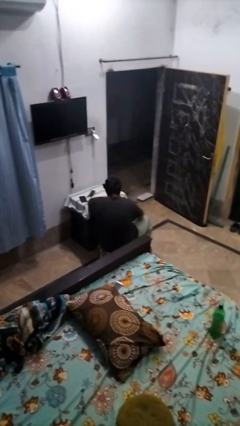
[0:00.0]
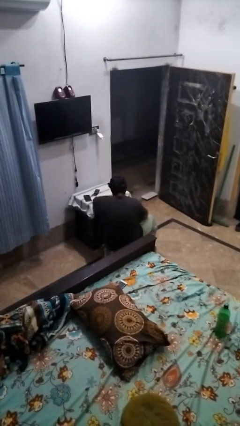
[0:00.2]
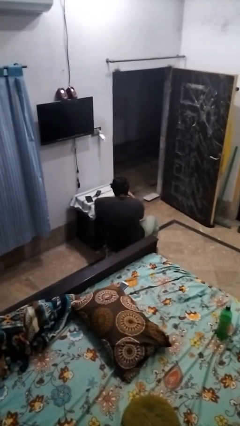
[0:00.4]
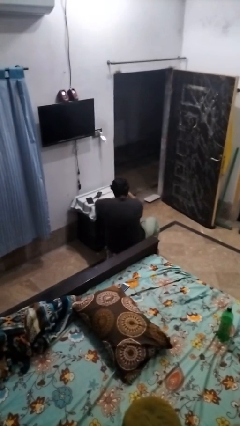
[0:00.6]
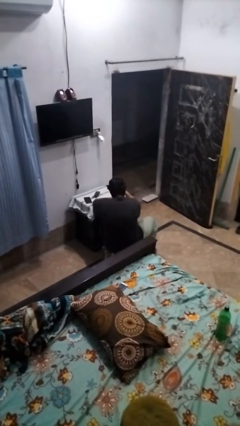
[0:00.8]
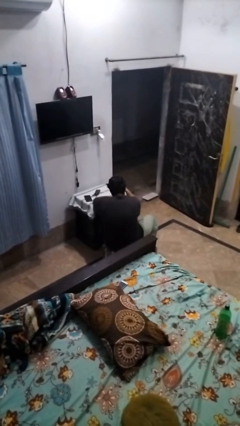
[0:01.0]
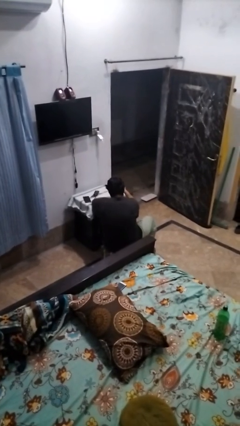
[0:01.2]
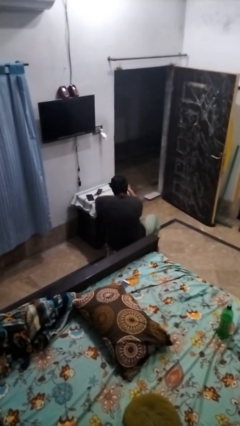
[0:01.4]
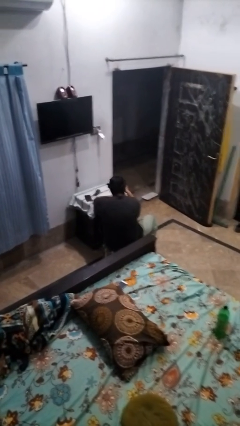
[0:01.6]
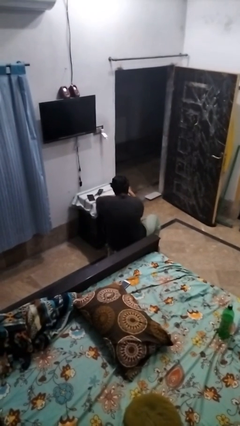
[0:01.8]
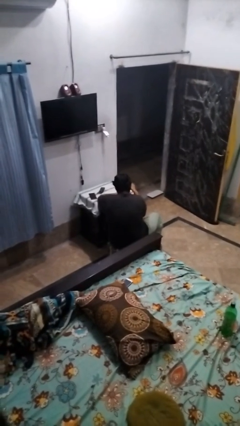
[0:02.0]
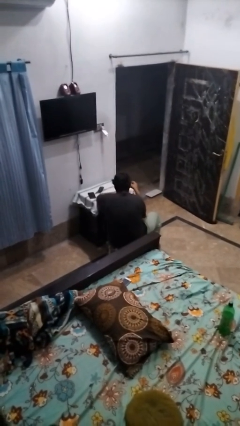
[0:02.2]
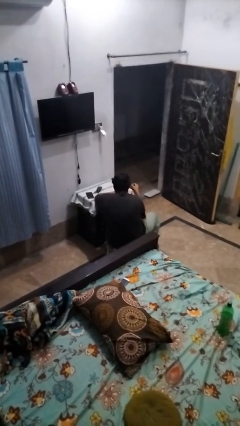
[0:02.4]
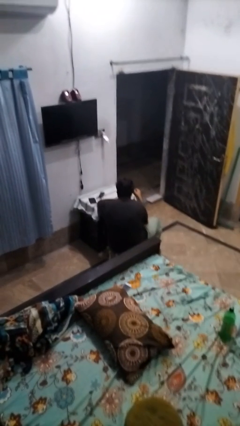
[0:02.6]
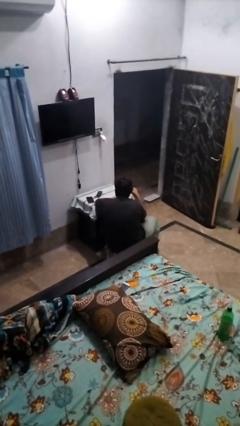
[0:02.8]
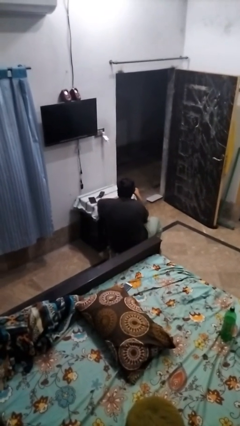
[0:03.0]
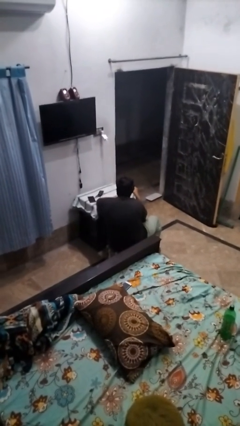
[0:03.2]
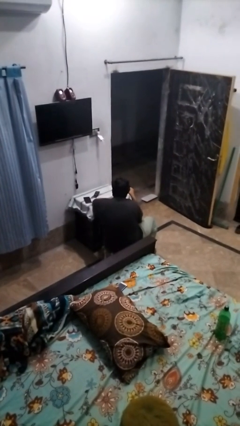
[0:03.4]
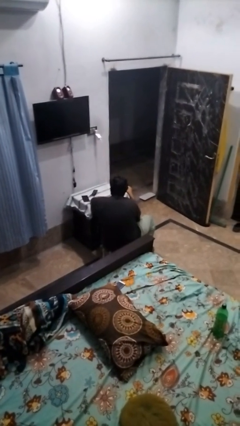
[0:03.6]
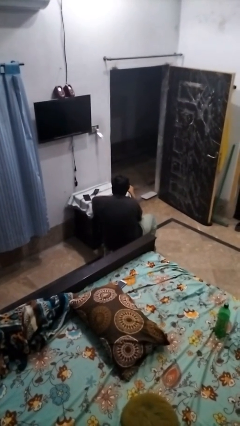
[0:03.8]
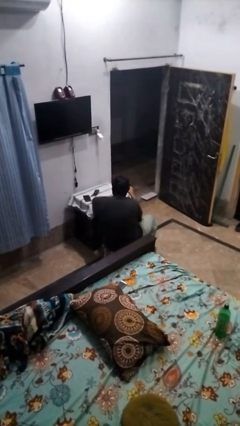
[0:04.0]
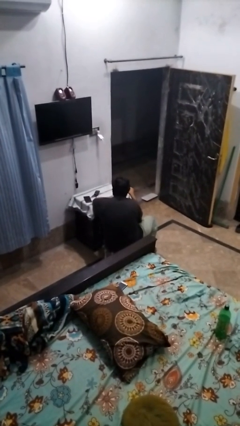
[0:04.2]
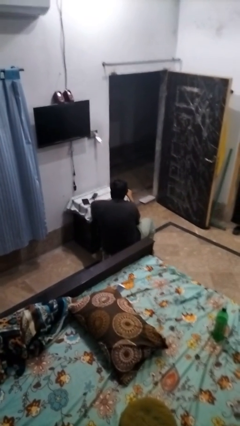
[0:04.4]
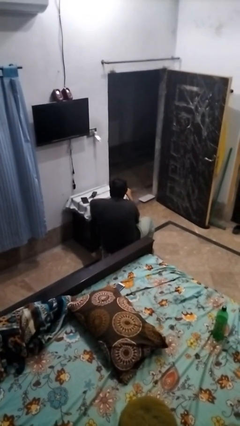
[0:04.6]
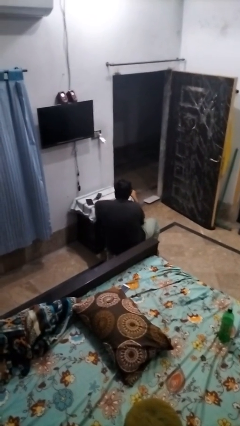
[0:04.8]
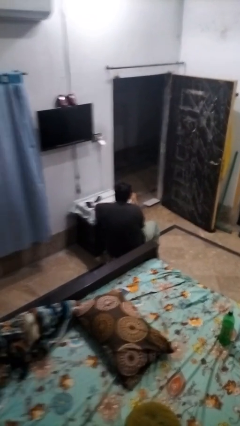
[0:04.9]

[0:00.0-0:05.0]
person paints fingernails

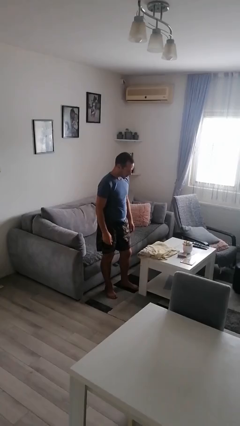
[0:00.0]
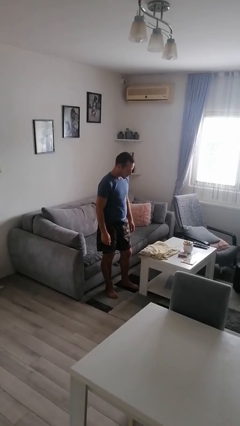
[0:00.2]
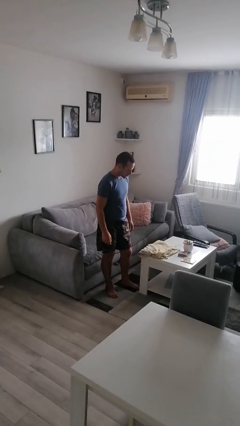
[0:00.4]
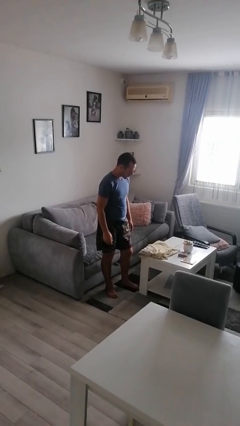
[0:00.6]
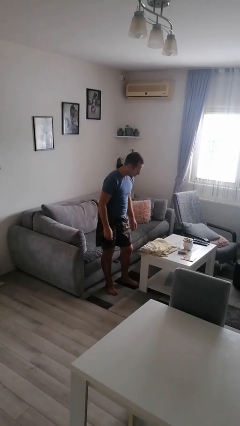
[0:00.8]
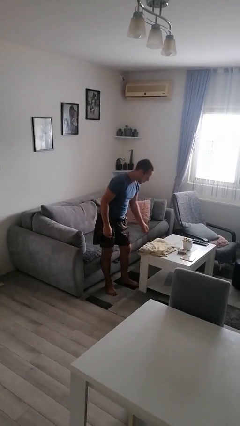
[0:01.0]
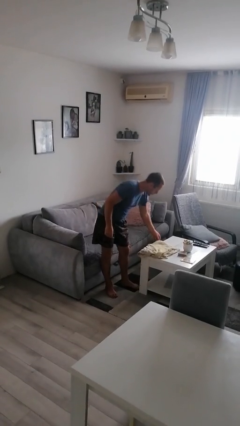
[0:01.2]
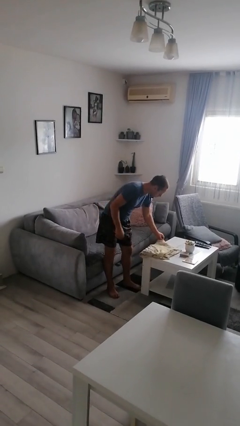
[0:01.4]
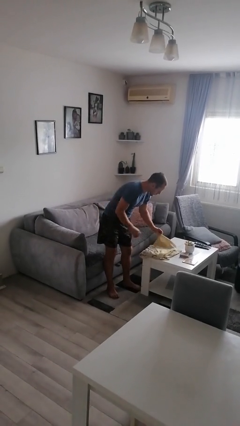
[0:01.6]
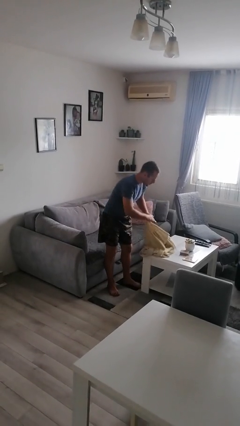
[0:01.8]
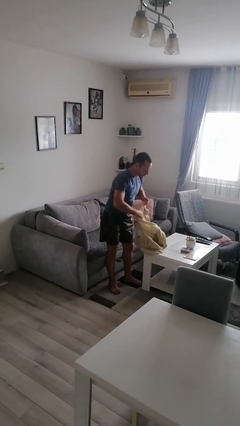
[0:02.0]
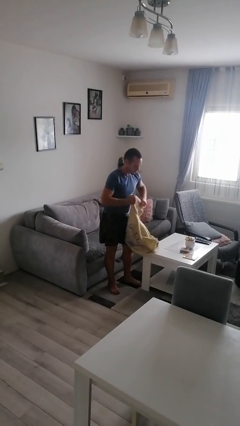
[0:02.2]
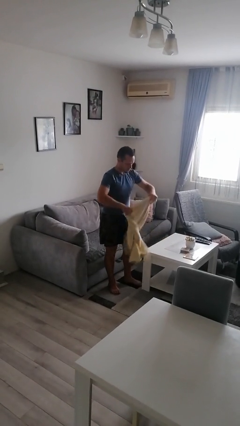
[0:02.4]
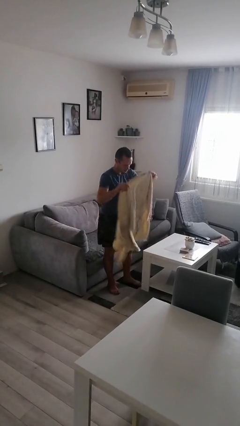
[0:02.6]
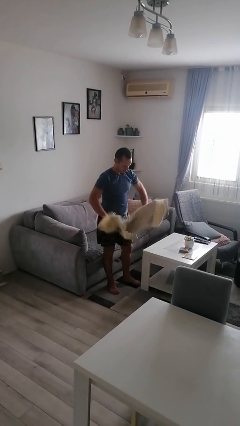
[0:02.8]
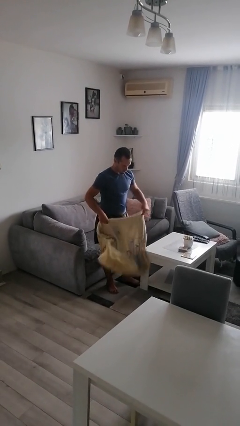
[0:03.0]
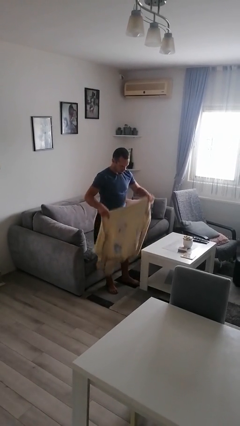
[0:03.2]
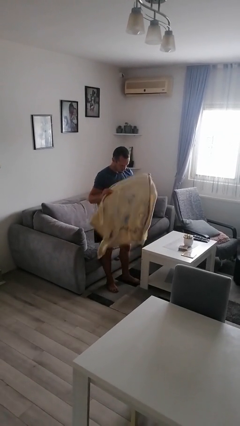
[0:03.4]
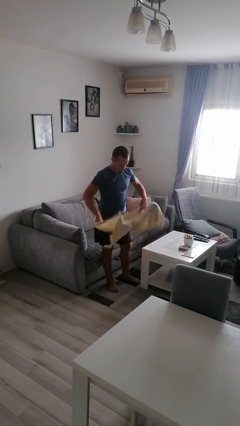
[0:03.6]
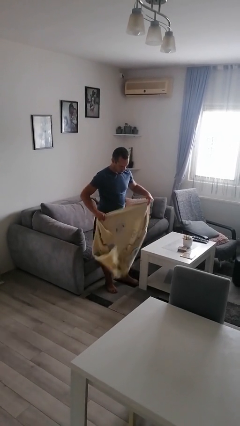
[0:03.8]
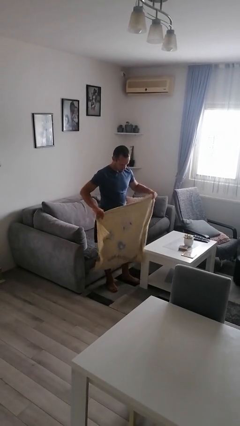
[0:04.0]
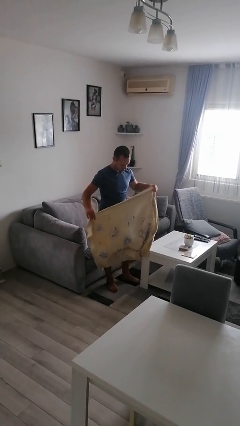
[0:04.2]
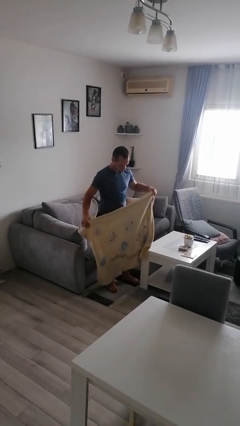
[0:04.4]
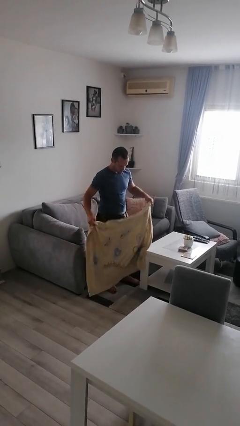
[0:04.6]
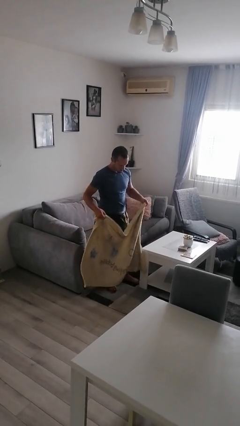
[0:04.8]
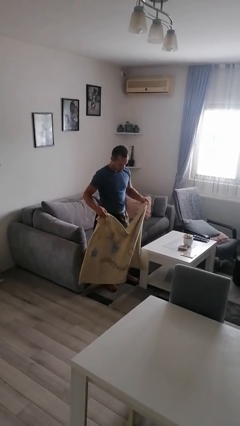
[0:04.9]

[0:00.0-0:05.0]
person unfolds blanket

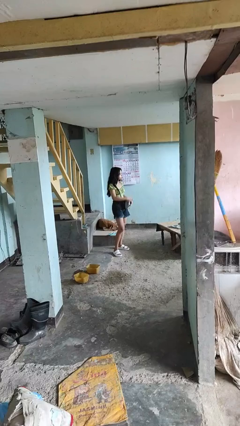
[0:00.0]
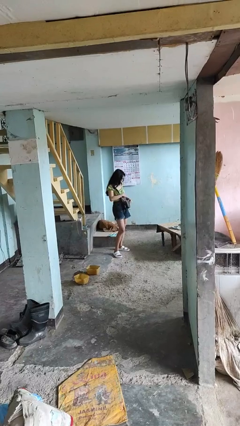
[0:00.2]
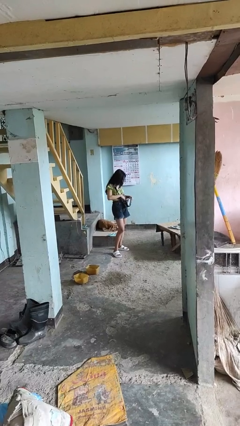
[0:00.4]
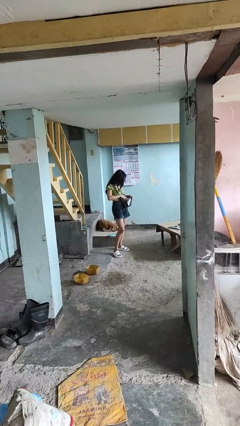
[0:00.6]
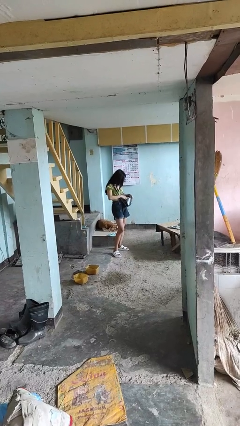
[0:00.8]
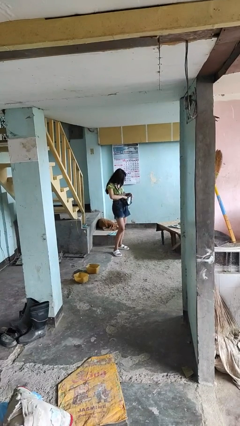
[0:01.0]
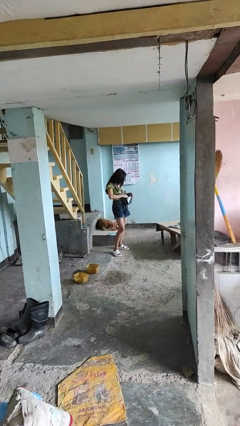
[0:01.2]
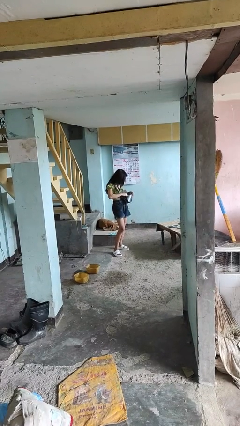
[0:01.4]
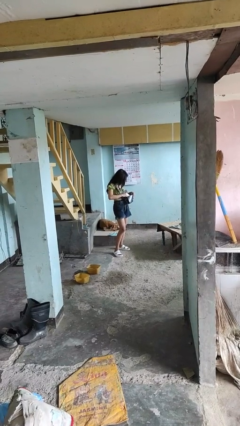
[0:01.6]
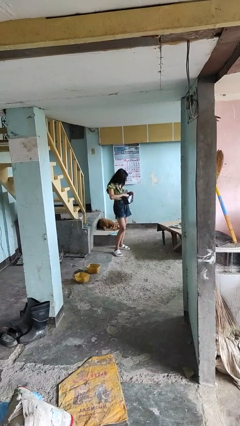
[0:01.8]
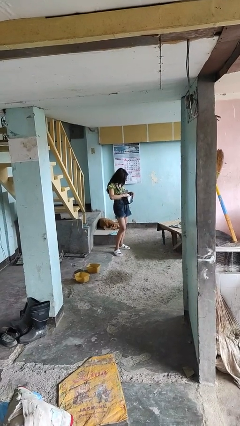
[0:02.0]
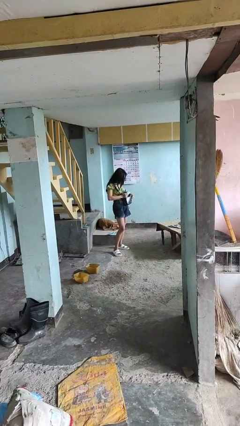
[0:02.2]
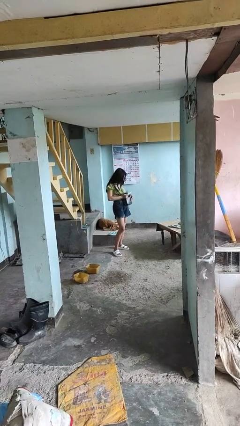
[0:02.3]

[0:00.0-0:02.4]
person searches in purse

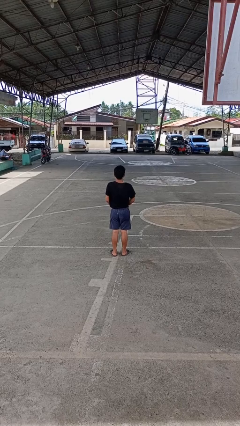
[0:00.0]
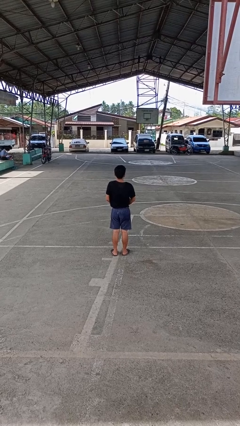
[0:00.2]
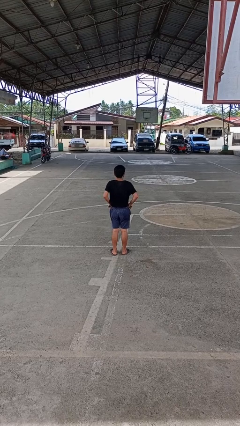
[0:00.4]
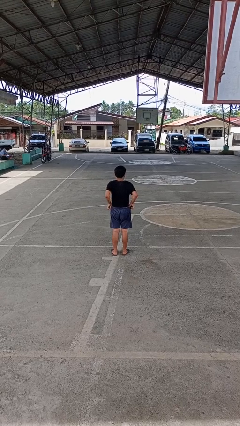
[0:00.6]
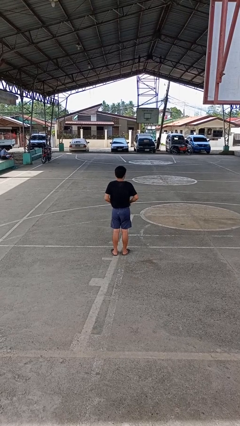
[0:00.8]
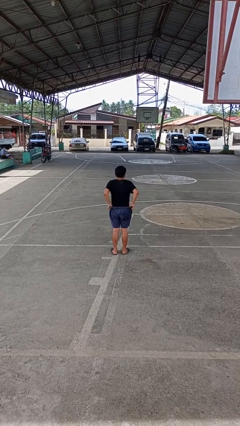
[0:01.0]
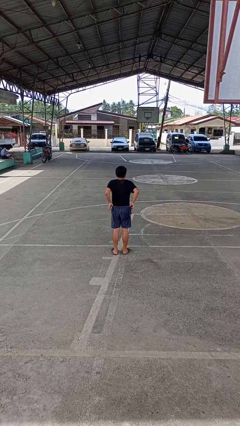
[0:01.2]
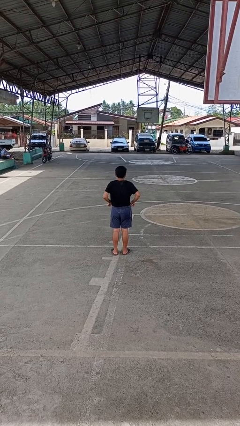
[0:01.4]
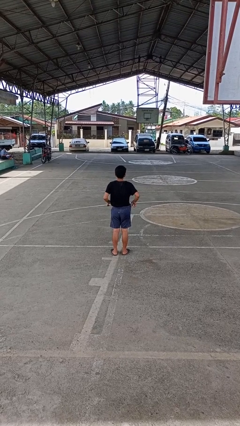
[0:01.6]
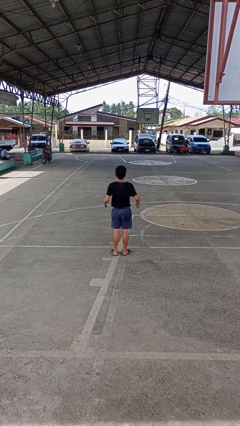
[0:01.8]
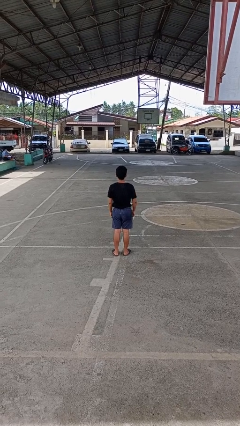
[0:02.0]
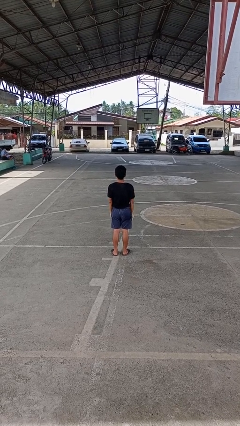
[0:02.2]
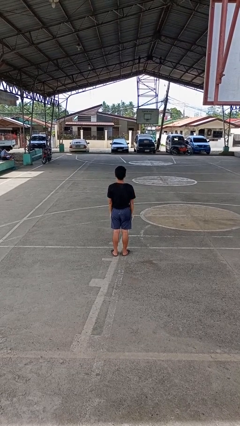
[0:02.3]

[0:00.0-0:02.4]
person hikes up pants

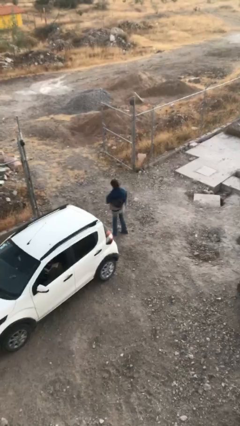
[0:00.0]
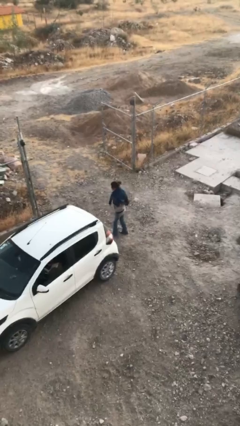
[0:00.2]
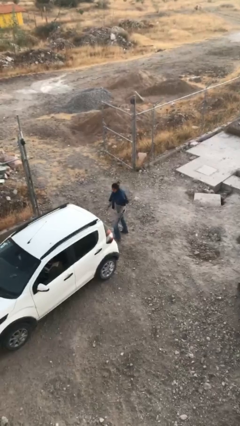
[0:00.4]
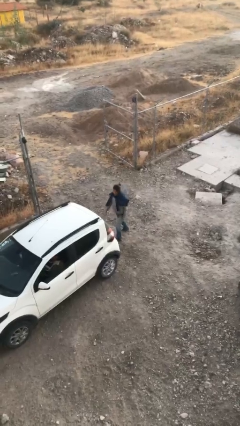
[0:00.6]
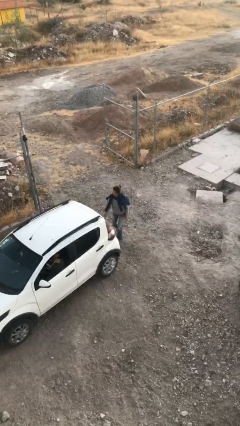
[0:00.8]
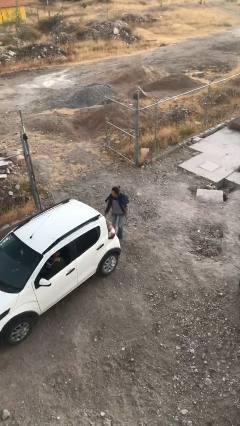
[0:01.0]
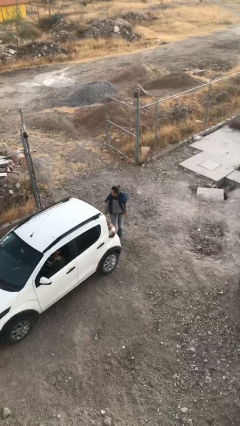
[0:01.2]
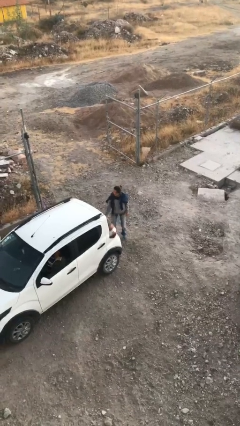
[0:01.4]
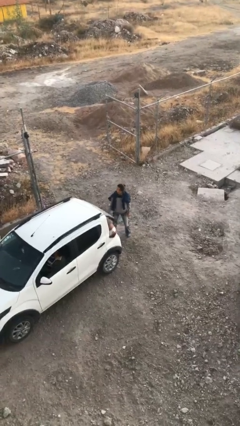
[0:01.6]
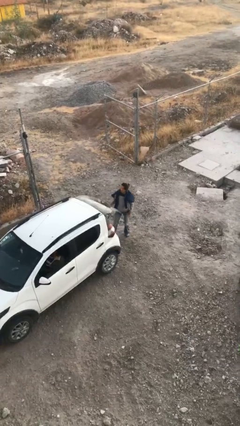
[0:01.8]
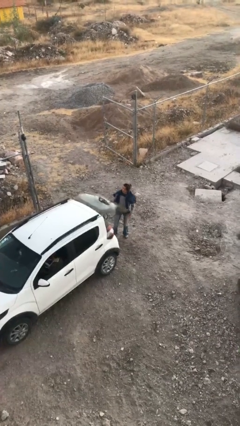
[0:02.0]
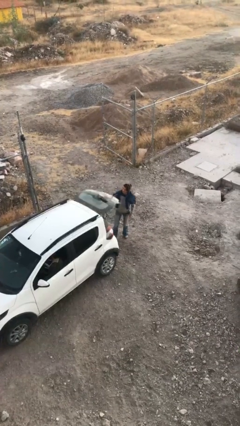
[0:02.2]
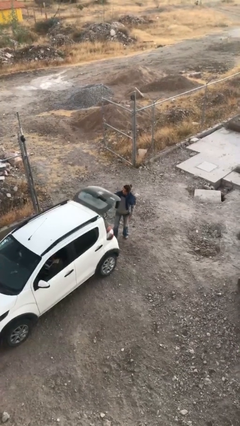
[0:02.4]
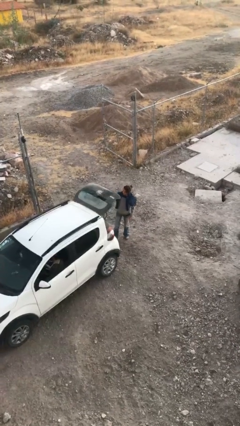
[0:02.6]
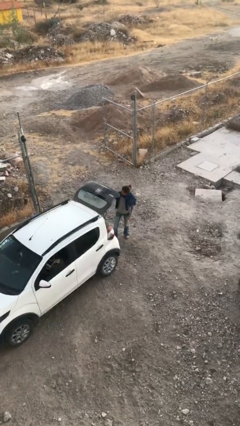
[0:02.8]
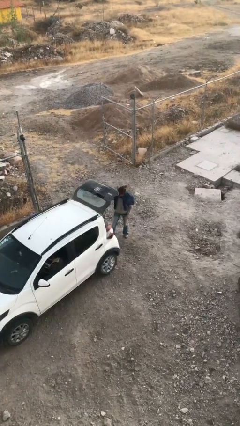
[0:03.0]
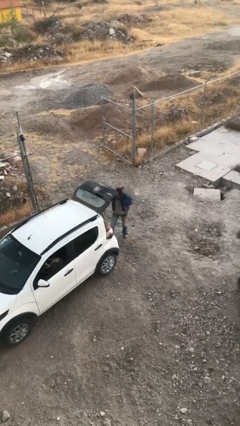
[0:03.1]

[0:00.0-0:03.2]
person opens car trunk
